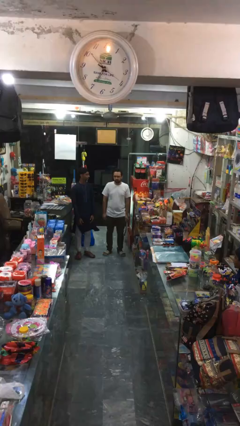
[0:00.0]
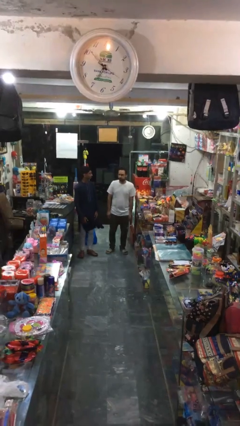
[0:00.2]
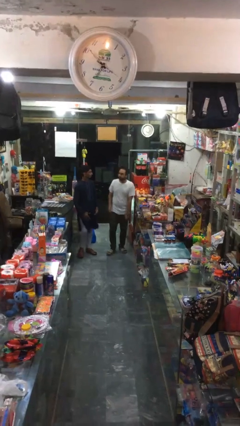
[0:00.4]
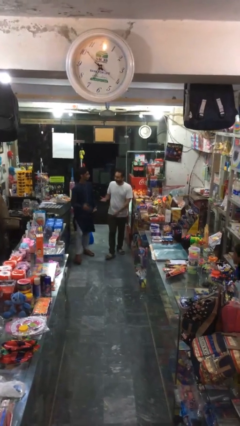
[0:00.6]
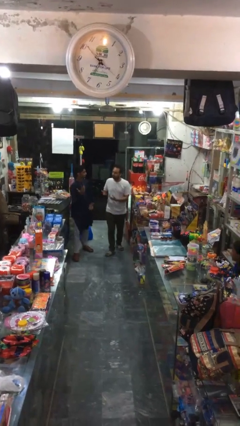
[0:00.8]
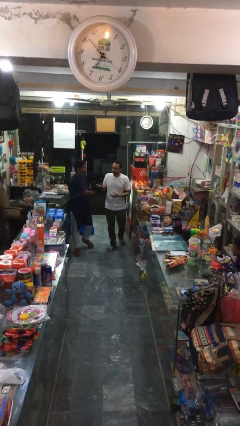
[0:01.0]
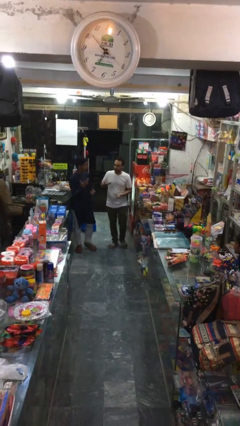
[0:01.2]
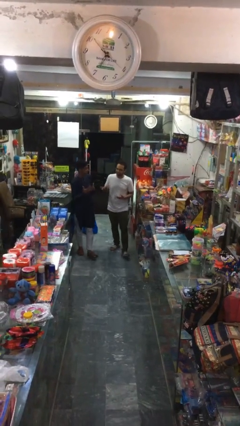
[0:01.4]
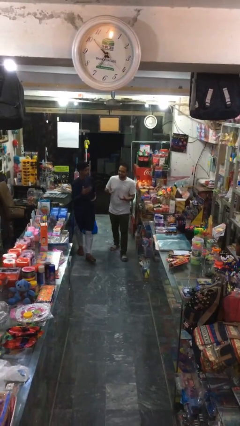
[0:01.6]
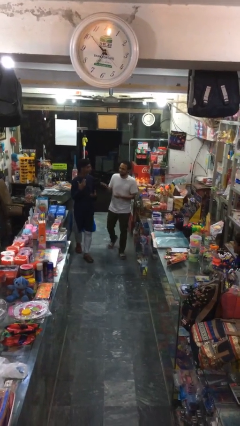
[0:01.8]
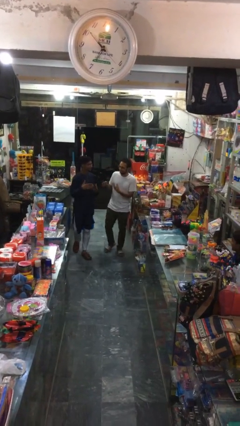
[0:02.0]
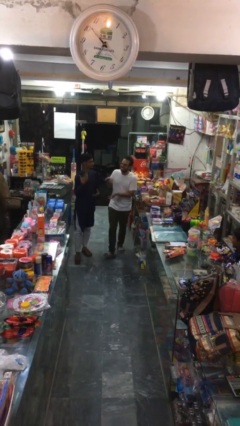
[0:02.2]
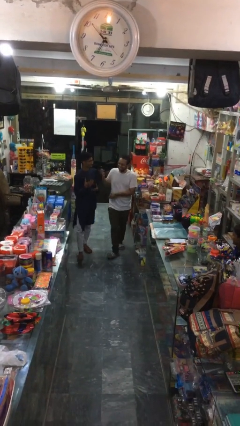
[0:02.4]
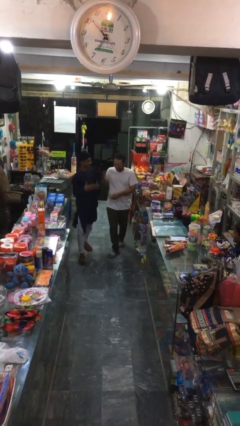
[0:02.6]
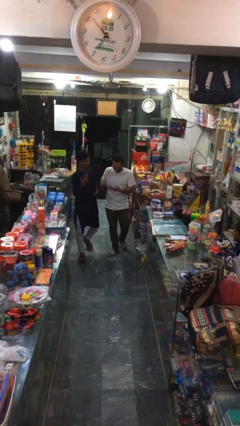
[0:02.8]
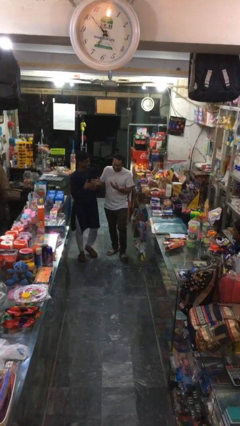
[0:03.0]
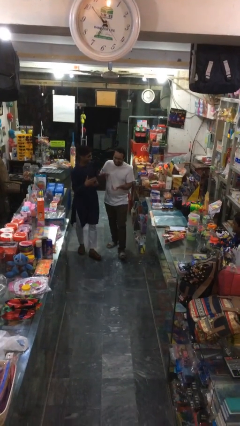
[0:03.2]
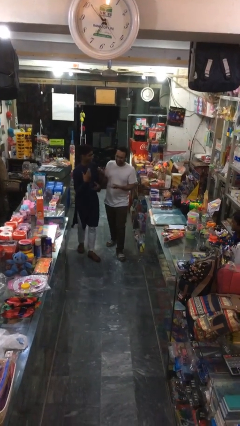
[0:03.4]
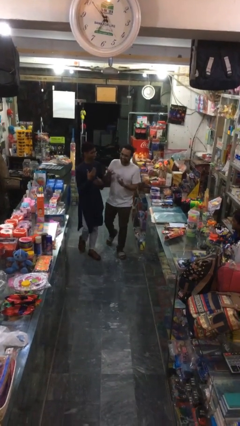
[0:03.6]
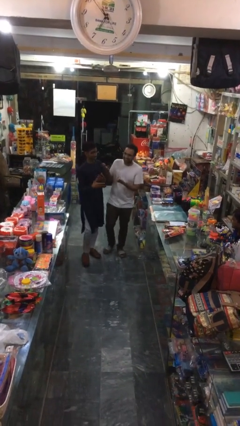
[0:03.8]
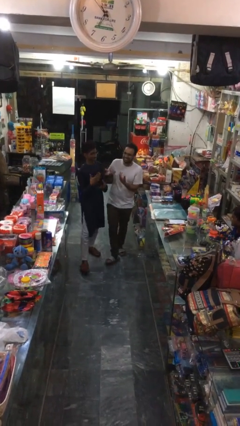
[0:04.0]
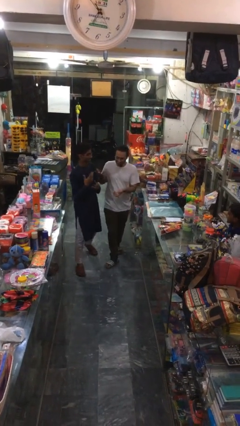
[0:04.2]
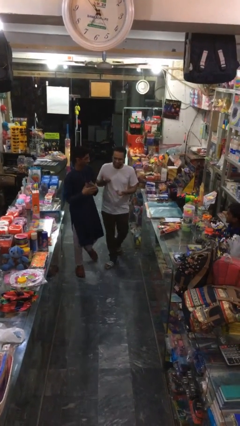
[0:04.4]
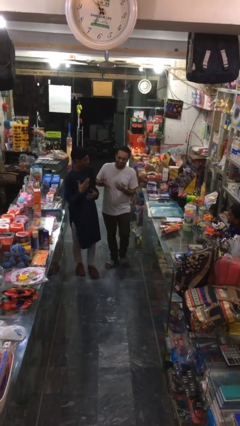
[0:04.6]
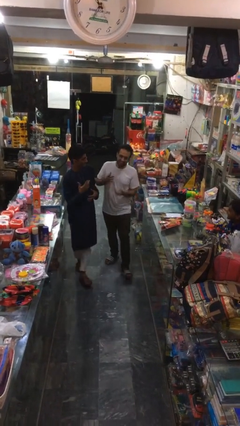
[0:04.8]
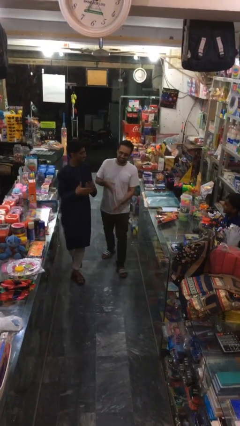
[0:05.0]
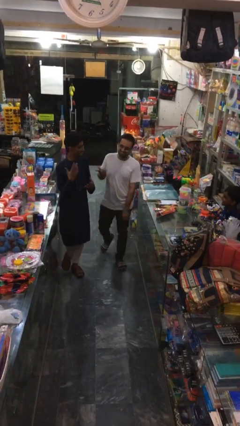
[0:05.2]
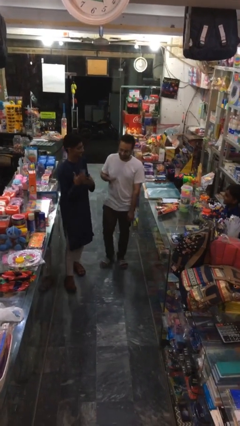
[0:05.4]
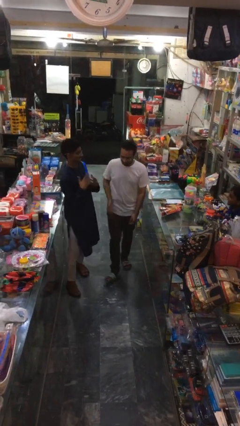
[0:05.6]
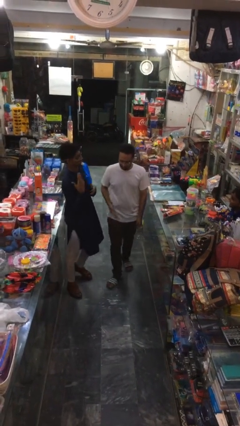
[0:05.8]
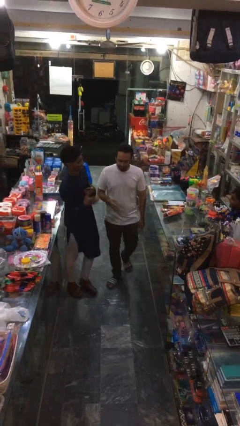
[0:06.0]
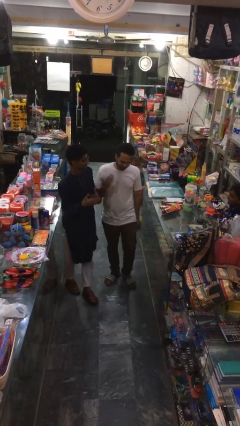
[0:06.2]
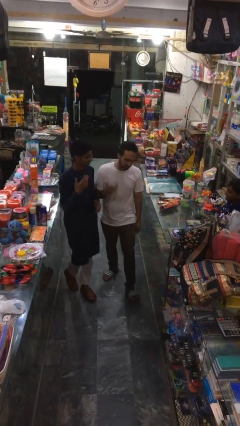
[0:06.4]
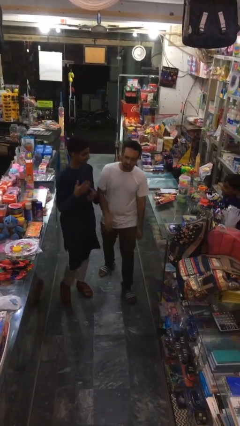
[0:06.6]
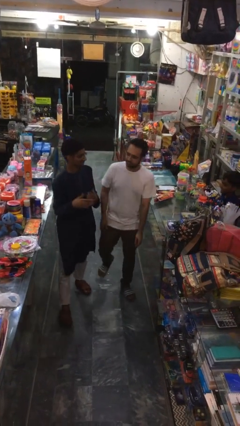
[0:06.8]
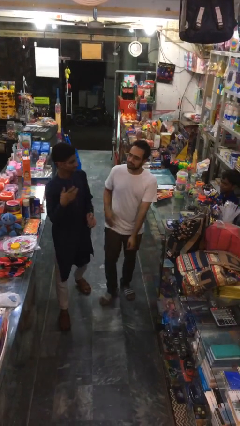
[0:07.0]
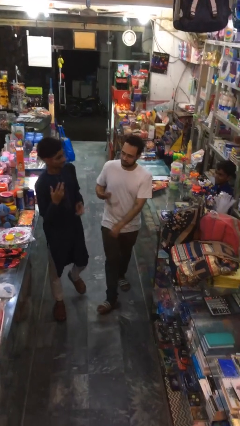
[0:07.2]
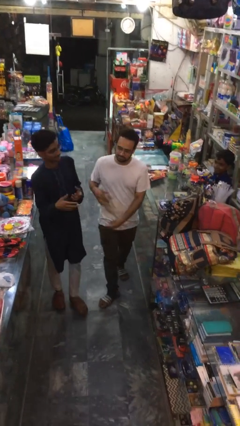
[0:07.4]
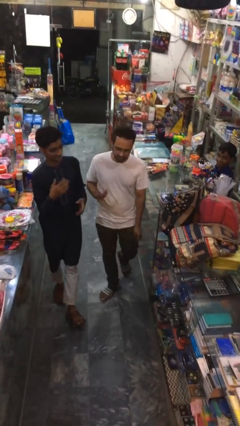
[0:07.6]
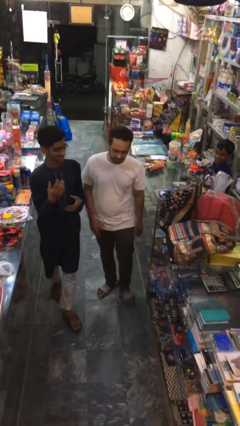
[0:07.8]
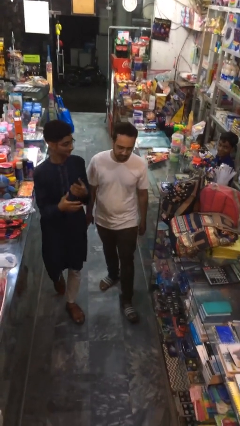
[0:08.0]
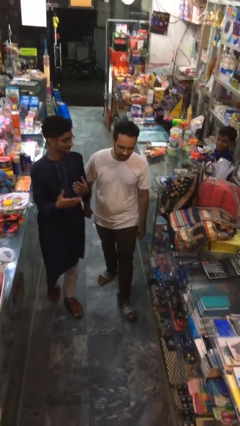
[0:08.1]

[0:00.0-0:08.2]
person talks to person

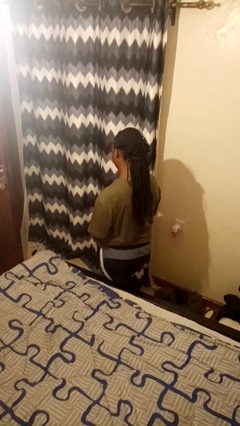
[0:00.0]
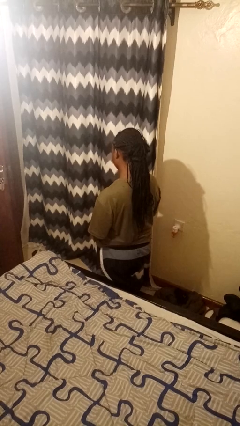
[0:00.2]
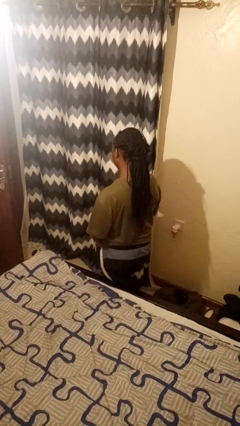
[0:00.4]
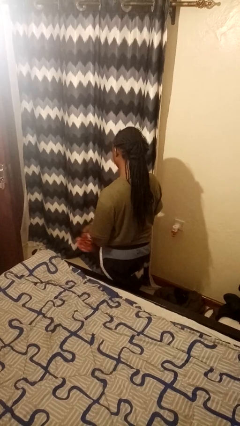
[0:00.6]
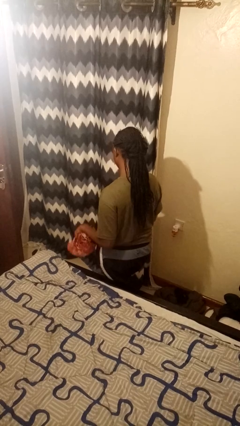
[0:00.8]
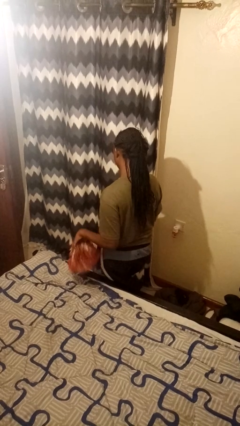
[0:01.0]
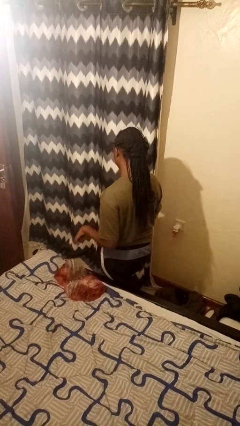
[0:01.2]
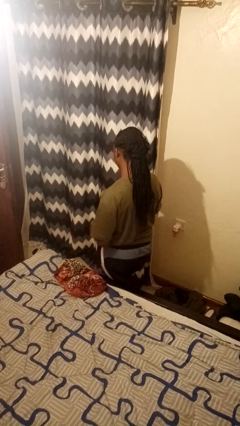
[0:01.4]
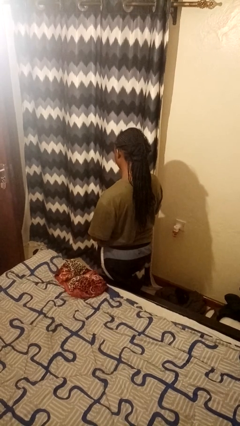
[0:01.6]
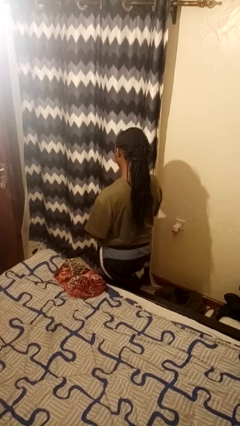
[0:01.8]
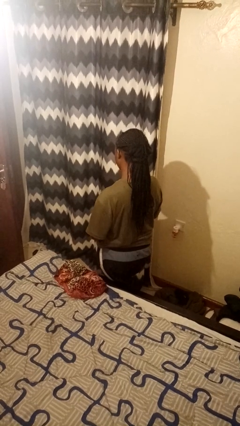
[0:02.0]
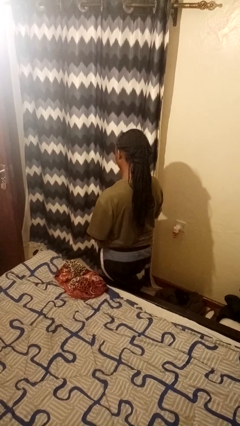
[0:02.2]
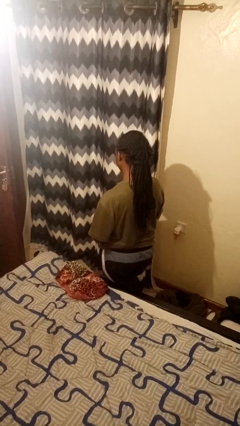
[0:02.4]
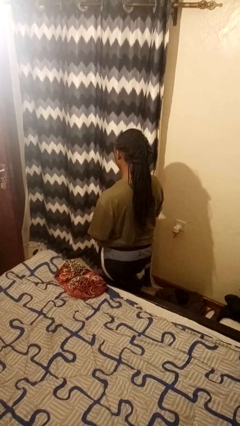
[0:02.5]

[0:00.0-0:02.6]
person throws object on bed

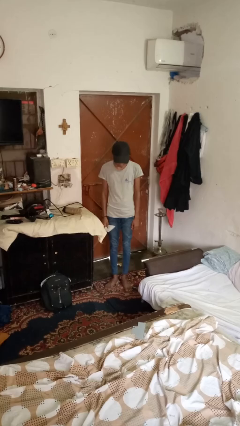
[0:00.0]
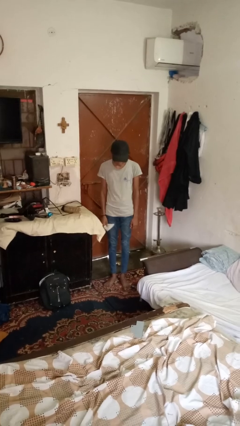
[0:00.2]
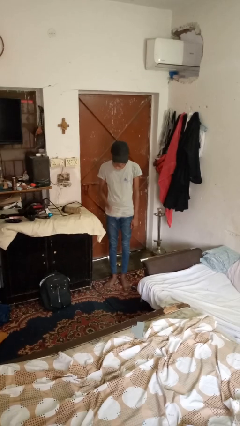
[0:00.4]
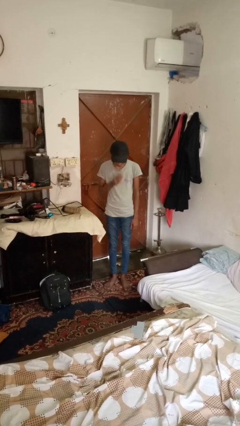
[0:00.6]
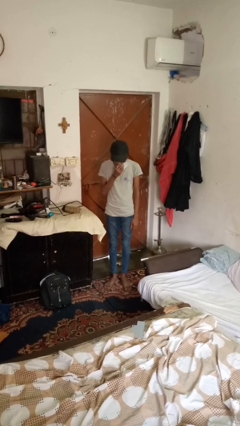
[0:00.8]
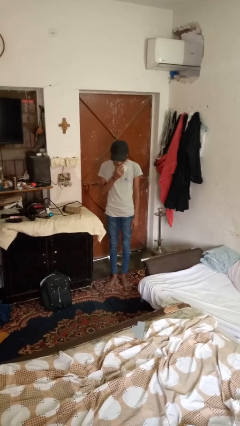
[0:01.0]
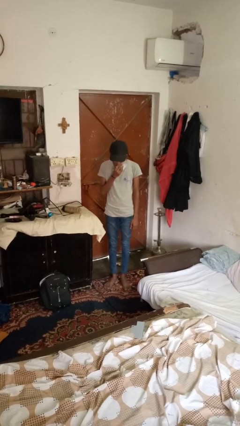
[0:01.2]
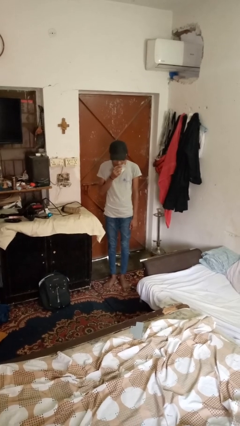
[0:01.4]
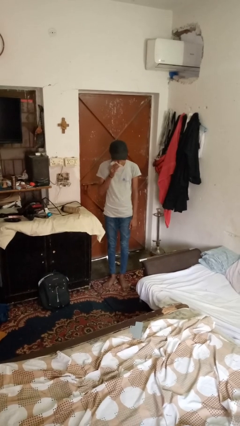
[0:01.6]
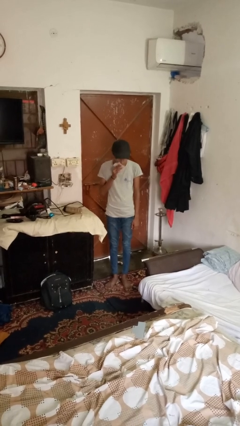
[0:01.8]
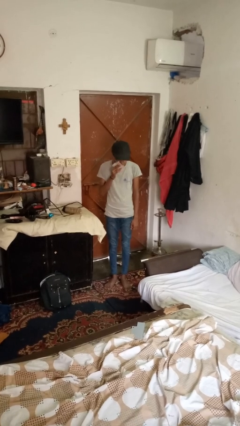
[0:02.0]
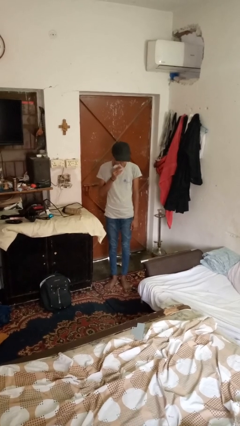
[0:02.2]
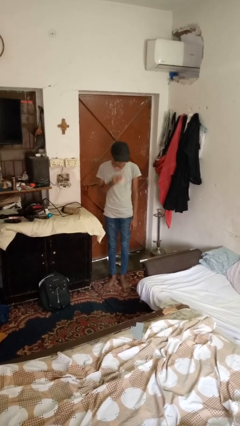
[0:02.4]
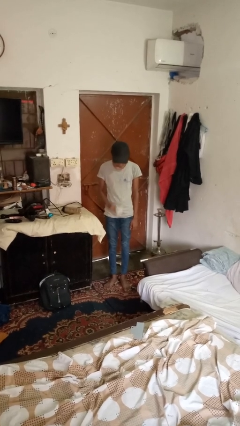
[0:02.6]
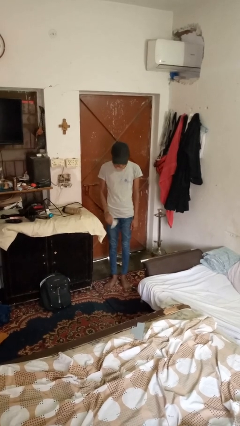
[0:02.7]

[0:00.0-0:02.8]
person wipes mouth with napkin

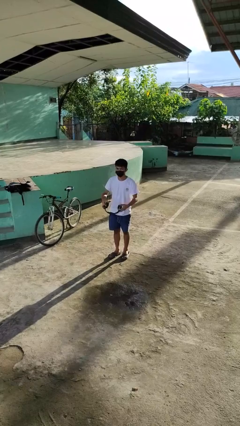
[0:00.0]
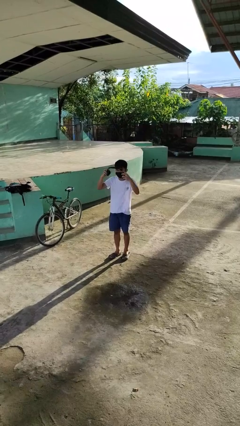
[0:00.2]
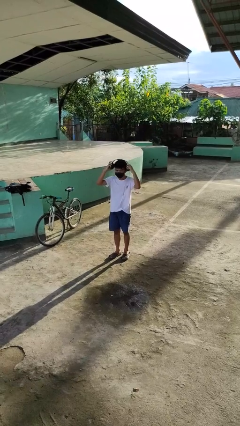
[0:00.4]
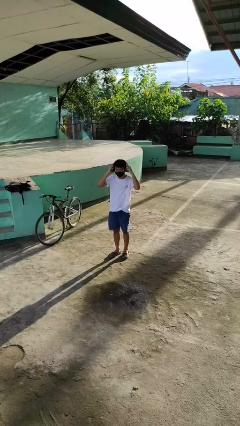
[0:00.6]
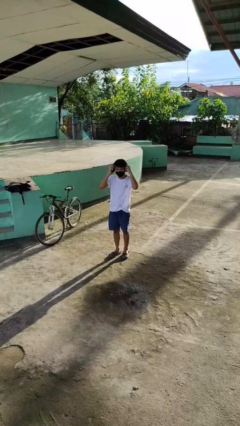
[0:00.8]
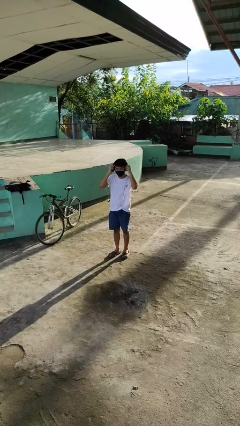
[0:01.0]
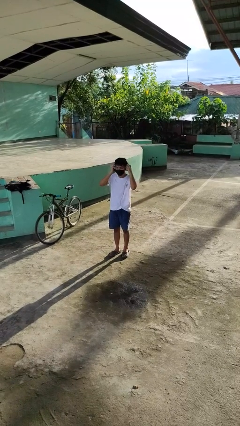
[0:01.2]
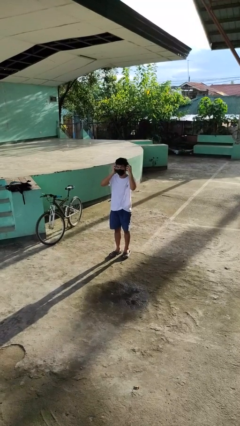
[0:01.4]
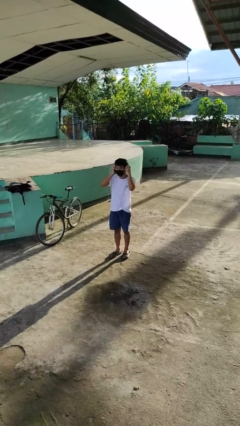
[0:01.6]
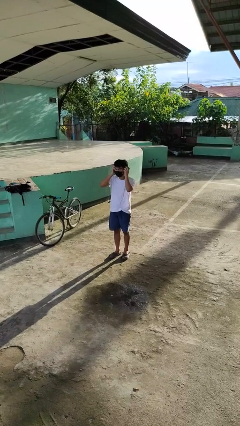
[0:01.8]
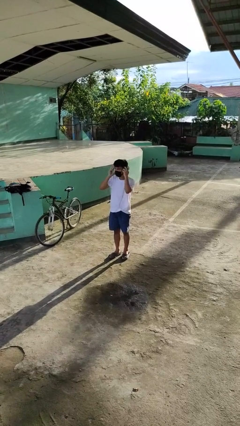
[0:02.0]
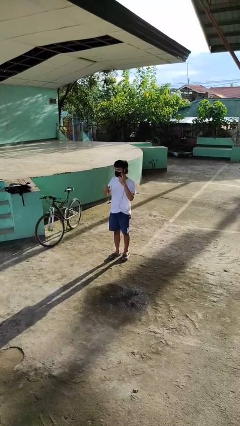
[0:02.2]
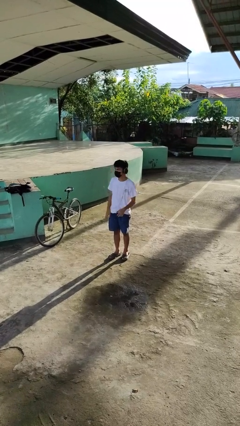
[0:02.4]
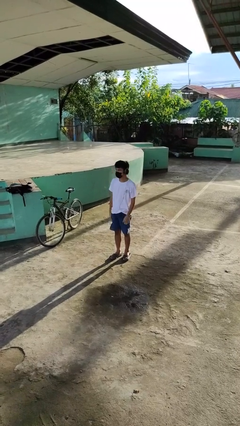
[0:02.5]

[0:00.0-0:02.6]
person puts on headphones

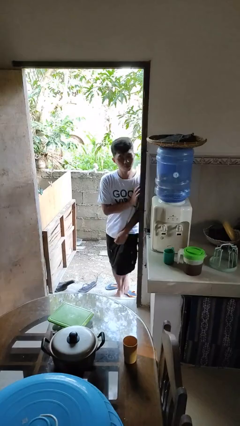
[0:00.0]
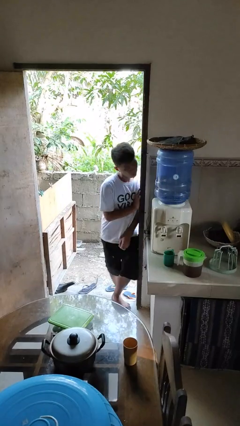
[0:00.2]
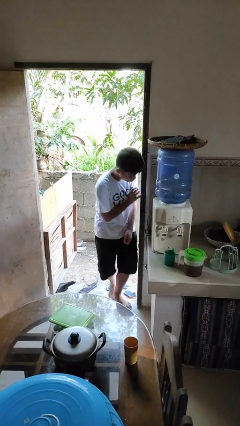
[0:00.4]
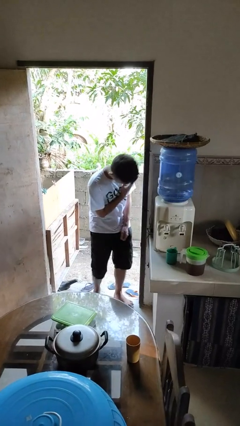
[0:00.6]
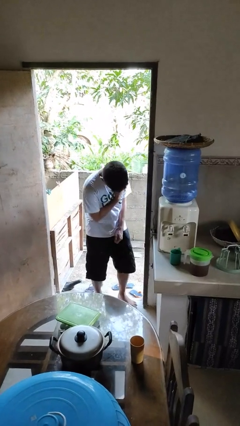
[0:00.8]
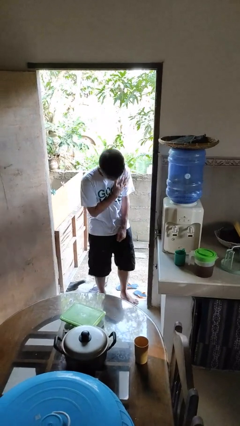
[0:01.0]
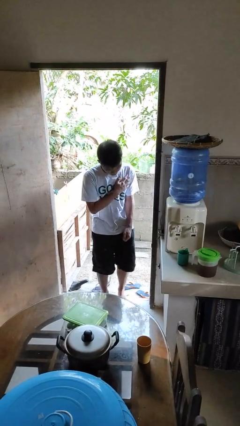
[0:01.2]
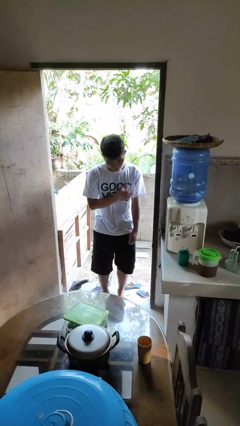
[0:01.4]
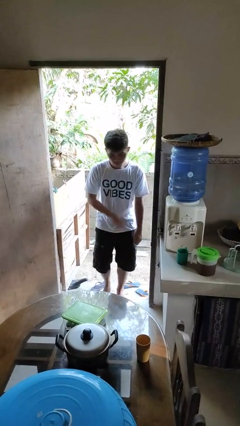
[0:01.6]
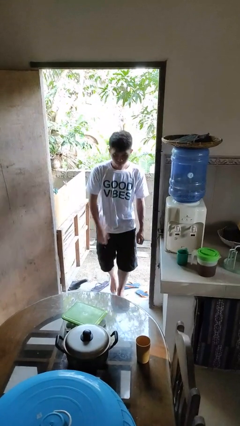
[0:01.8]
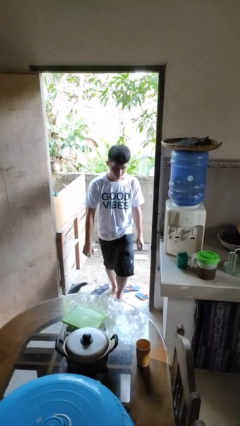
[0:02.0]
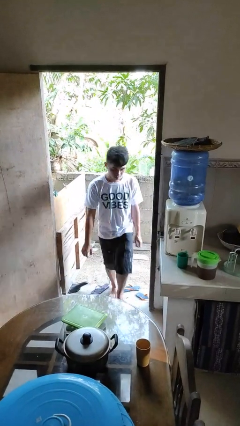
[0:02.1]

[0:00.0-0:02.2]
person bumps into wall
